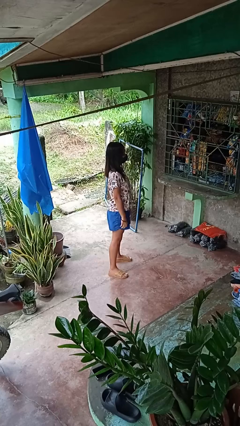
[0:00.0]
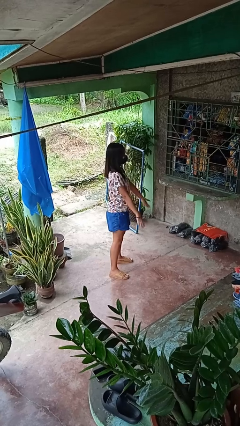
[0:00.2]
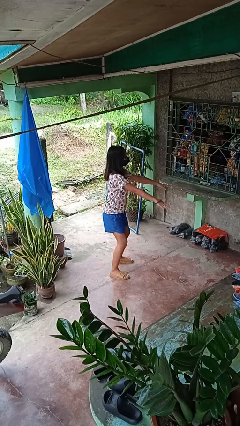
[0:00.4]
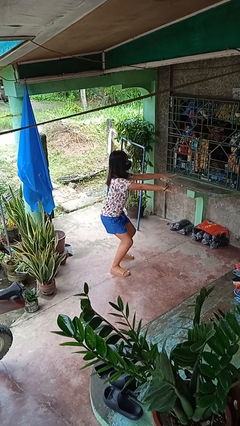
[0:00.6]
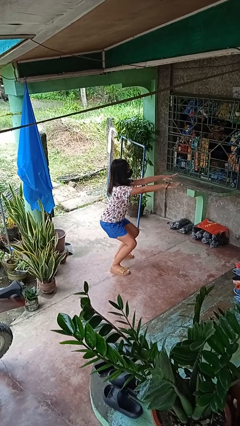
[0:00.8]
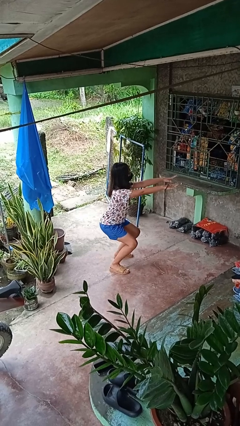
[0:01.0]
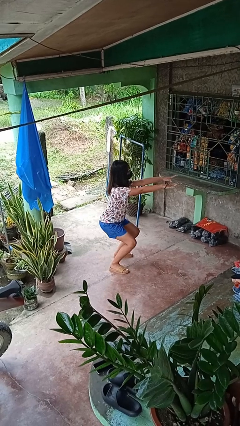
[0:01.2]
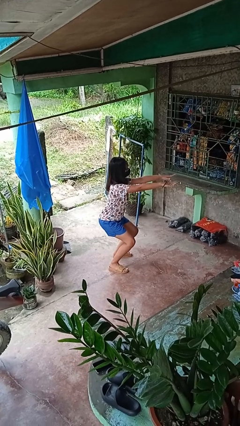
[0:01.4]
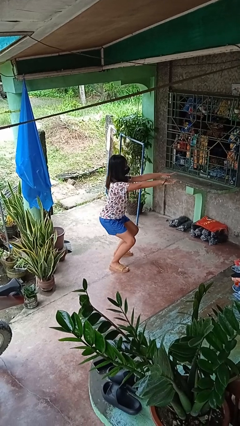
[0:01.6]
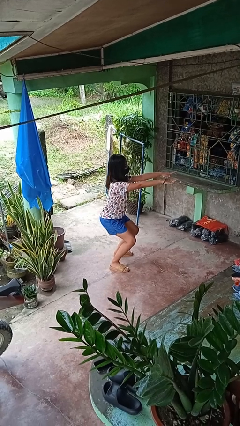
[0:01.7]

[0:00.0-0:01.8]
person squats

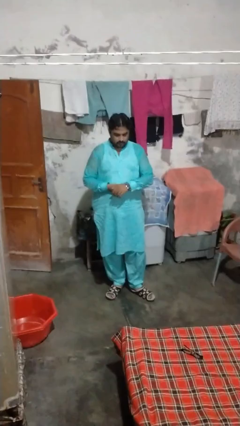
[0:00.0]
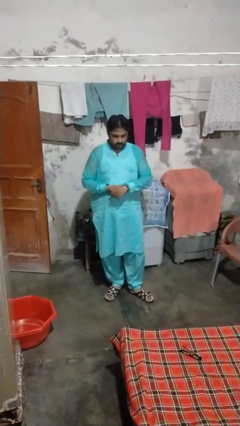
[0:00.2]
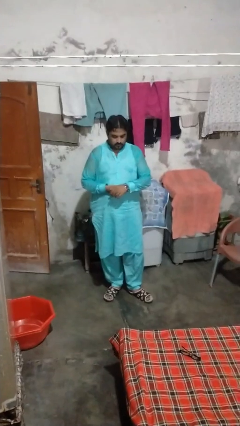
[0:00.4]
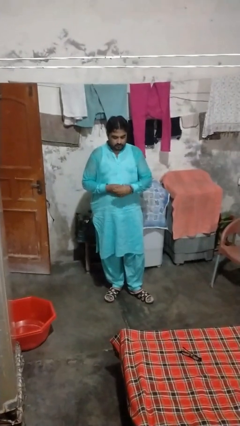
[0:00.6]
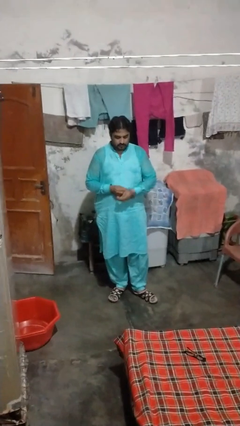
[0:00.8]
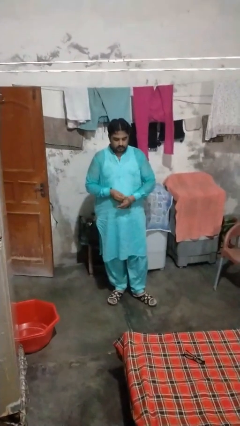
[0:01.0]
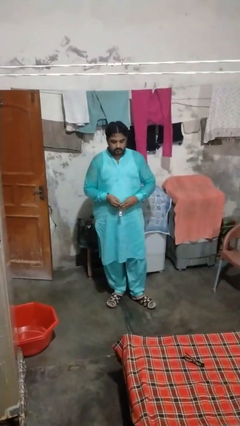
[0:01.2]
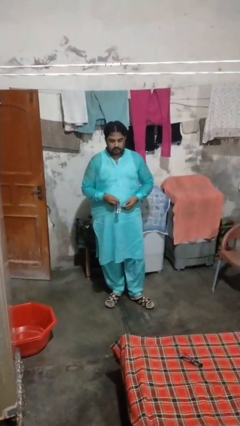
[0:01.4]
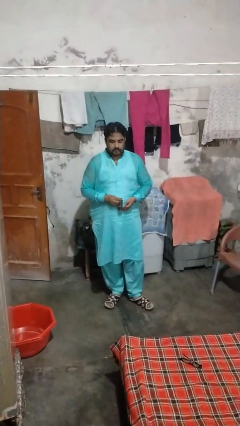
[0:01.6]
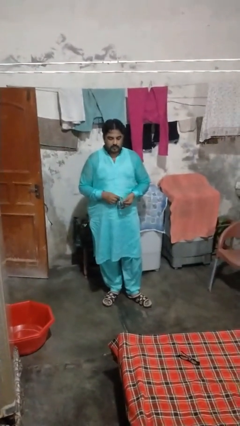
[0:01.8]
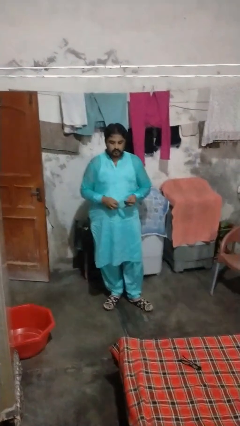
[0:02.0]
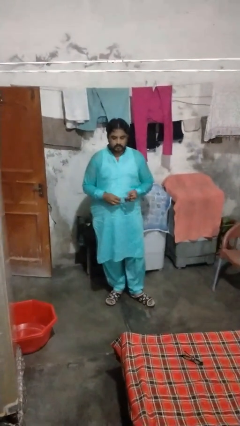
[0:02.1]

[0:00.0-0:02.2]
person takes off wristwatch

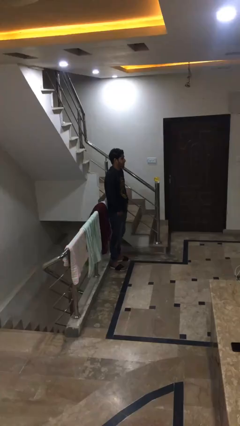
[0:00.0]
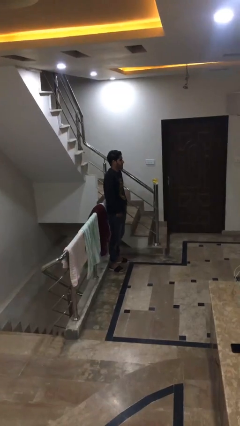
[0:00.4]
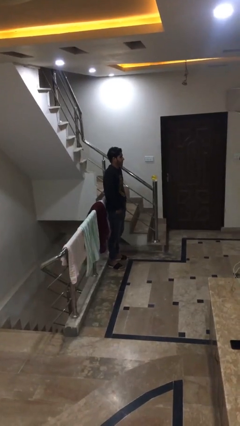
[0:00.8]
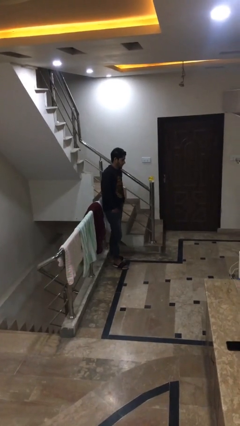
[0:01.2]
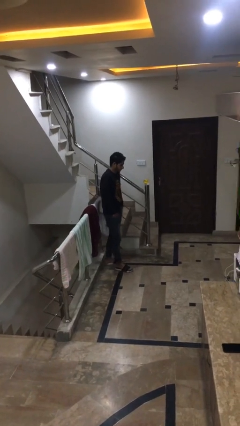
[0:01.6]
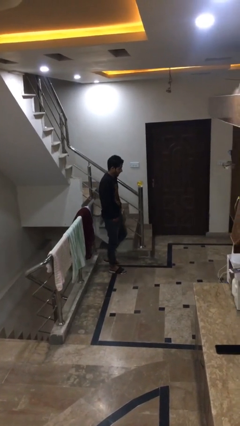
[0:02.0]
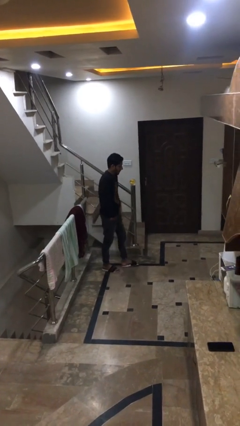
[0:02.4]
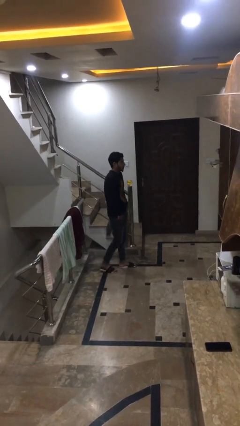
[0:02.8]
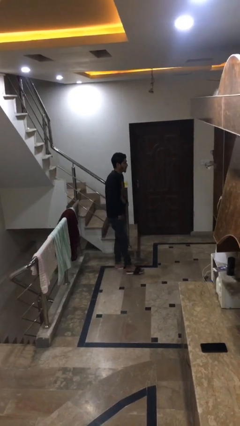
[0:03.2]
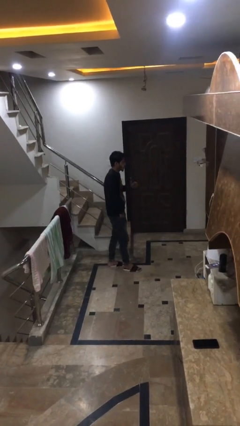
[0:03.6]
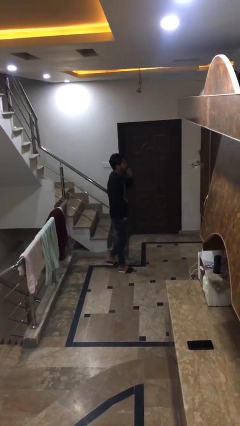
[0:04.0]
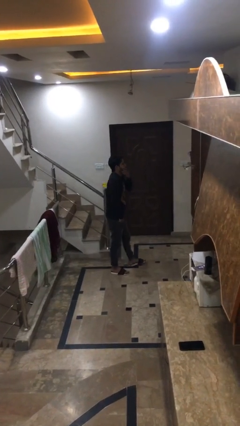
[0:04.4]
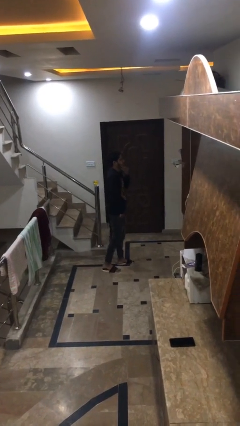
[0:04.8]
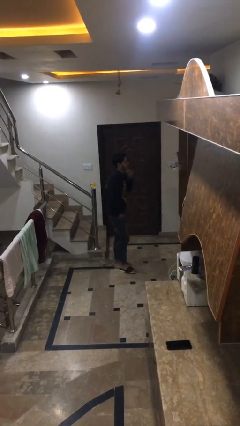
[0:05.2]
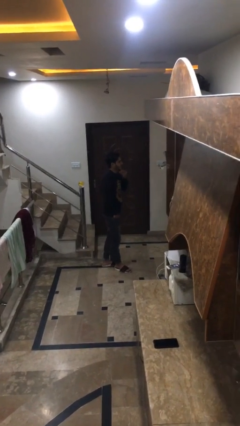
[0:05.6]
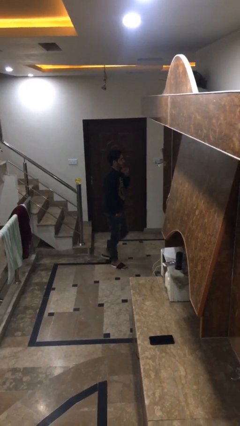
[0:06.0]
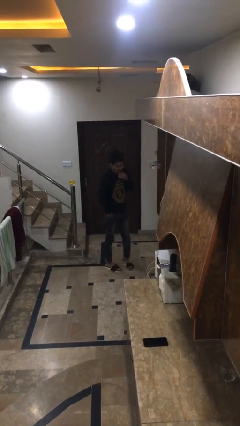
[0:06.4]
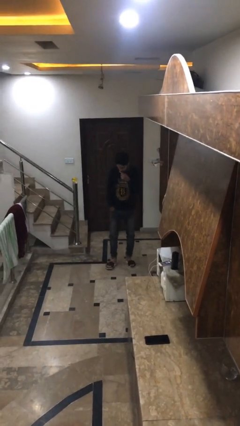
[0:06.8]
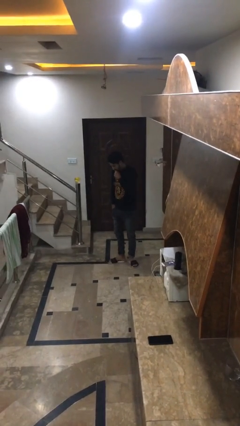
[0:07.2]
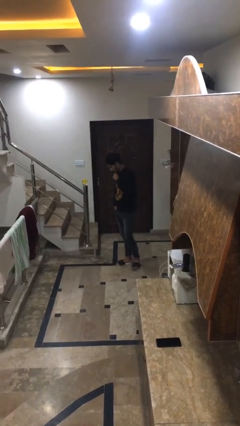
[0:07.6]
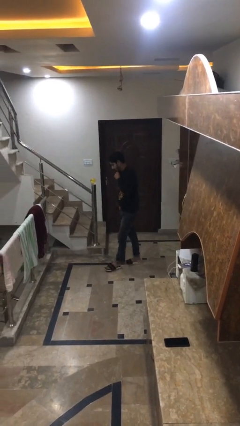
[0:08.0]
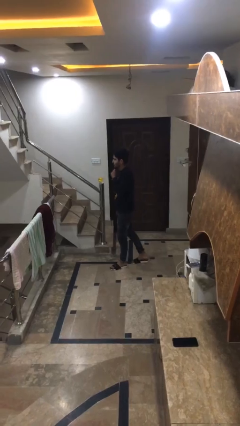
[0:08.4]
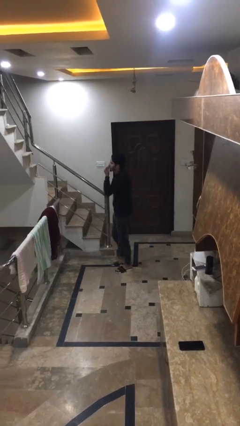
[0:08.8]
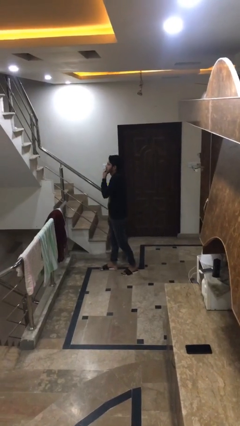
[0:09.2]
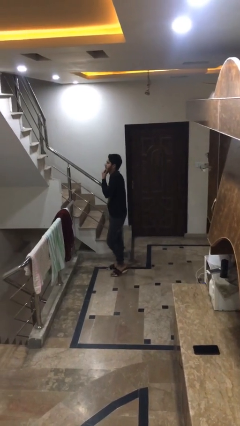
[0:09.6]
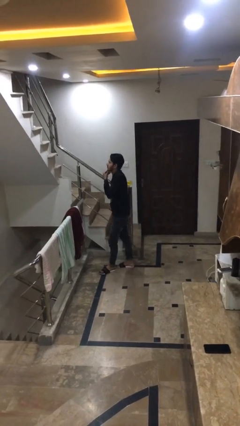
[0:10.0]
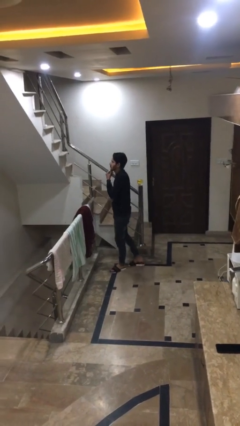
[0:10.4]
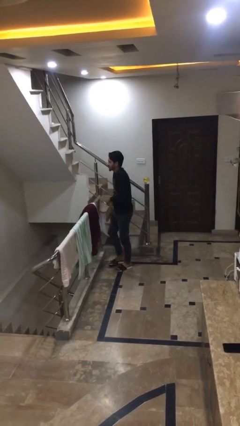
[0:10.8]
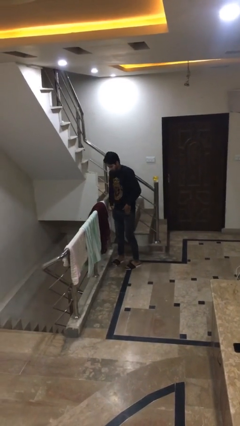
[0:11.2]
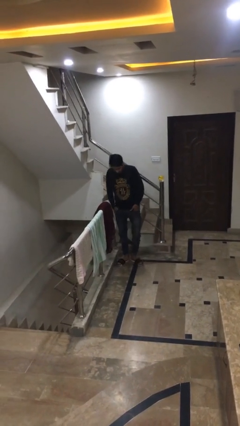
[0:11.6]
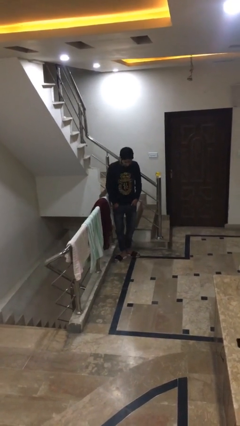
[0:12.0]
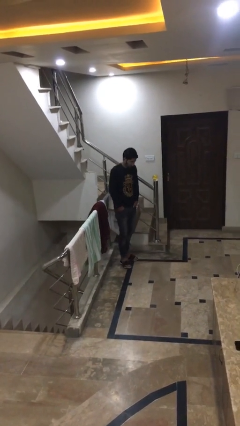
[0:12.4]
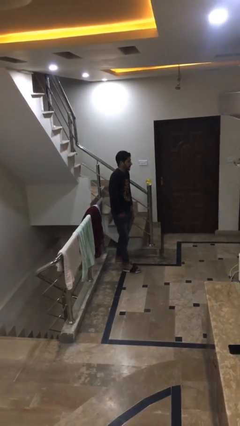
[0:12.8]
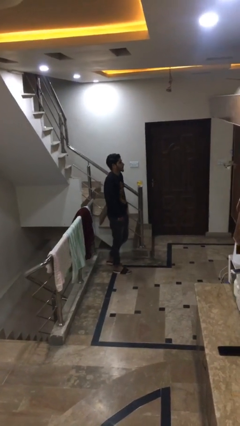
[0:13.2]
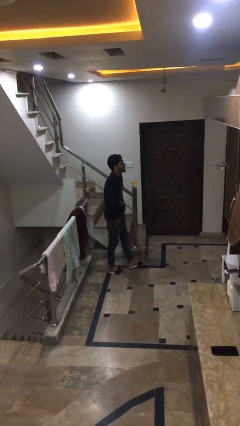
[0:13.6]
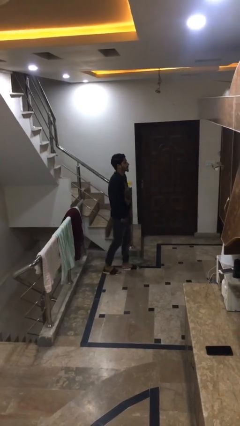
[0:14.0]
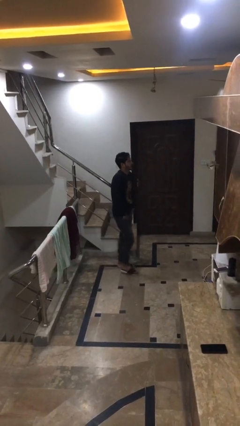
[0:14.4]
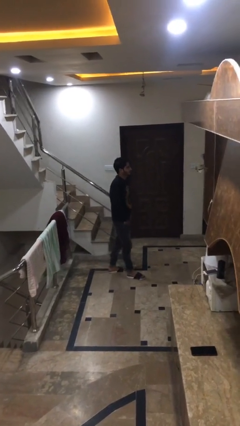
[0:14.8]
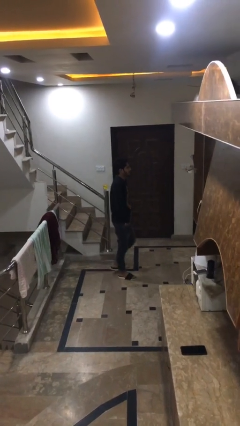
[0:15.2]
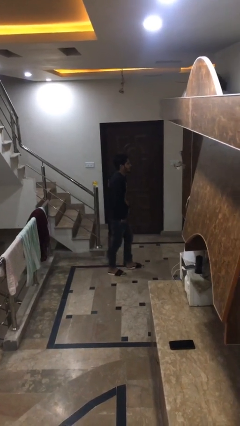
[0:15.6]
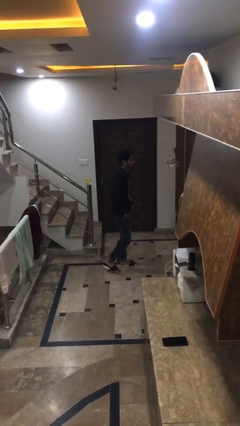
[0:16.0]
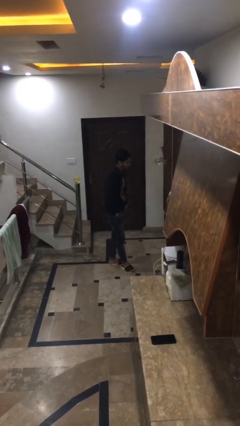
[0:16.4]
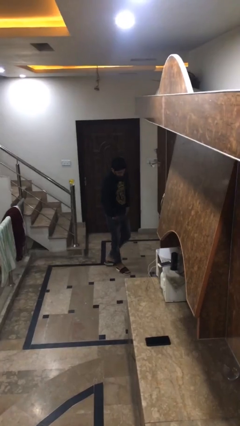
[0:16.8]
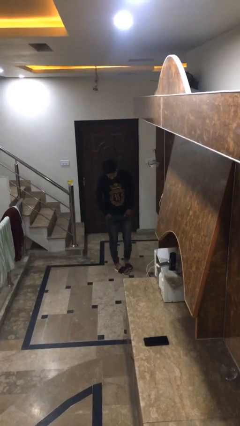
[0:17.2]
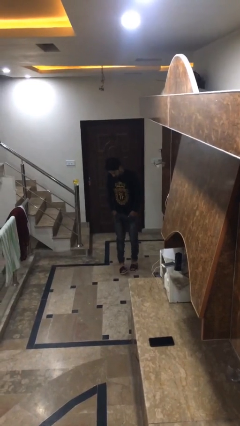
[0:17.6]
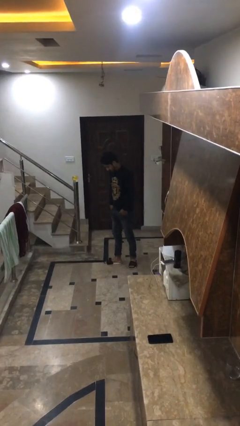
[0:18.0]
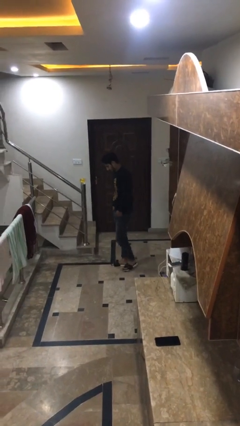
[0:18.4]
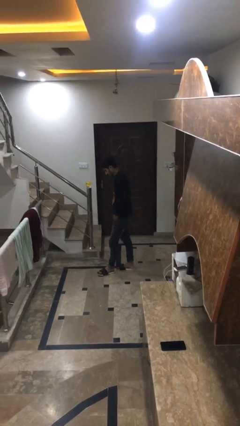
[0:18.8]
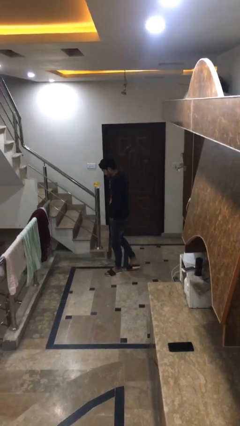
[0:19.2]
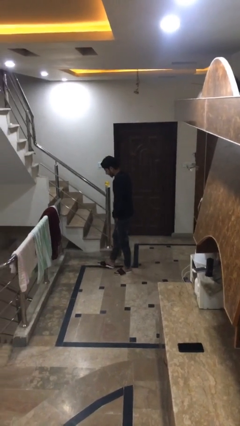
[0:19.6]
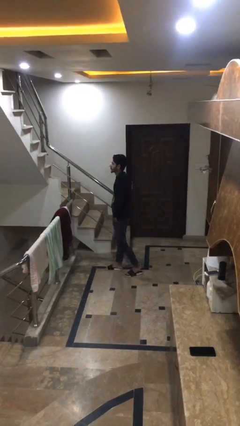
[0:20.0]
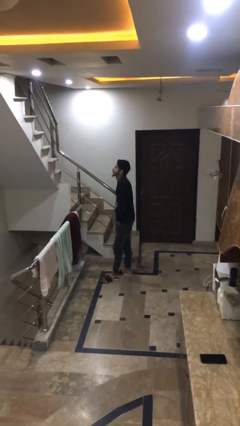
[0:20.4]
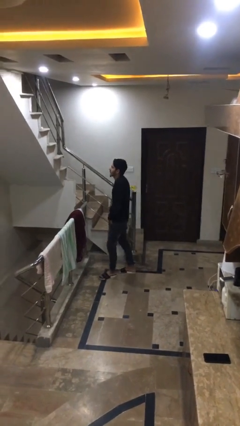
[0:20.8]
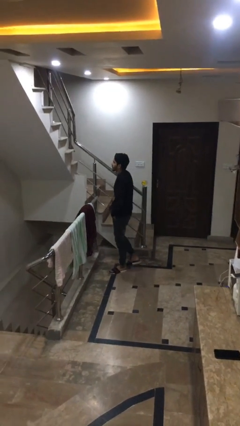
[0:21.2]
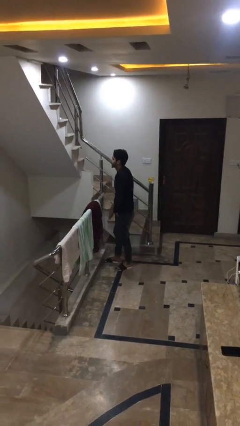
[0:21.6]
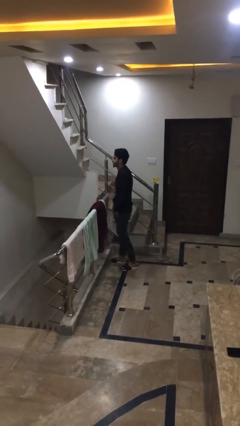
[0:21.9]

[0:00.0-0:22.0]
person walks

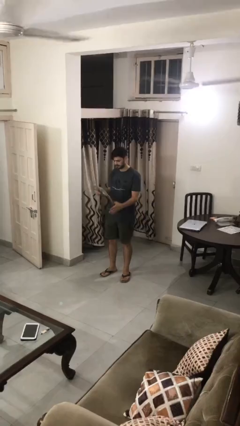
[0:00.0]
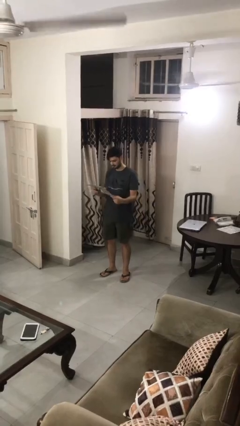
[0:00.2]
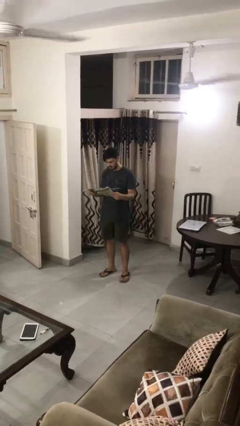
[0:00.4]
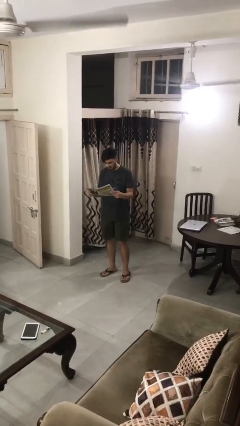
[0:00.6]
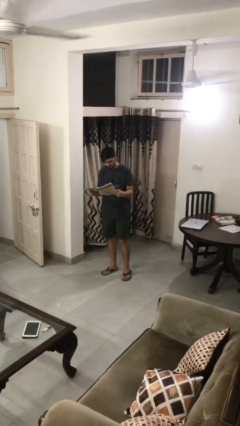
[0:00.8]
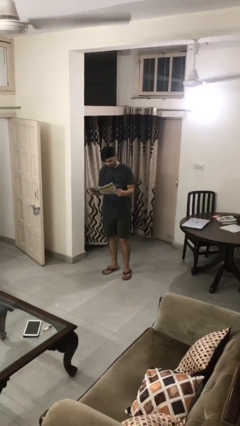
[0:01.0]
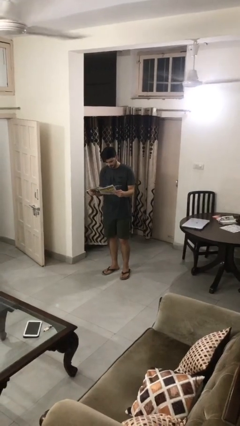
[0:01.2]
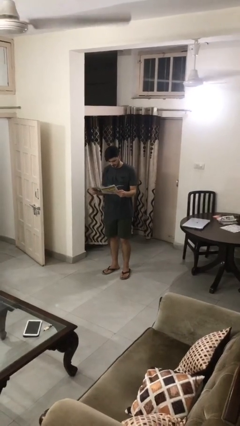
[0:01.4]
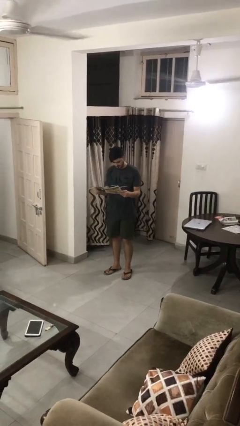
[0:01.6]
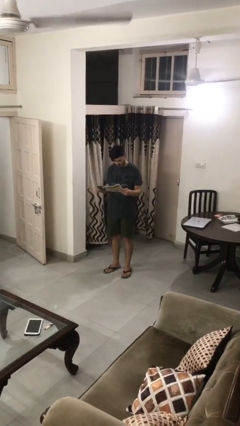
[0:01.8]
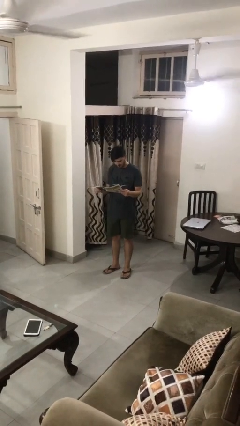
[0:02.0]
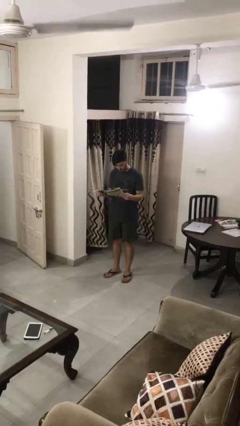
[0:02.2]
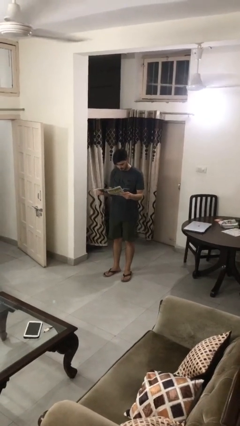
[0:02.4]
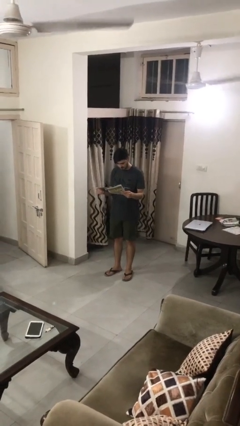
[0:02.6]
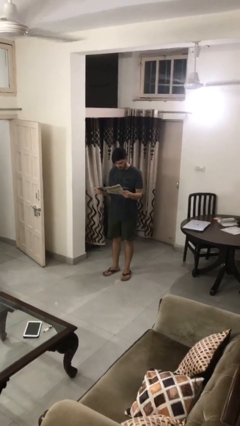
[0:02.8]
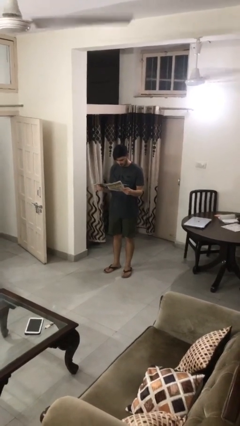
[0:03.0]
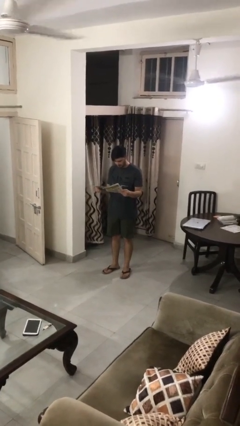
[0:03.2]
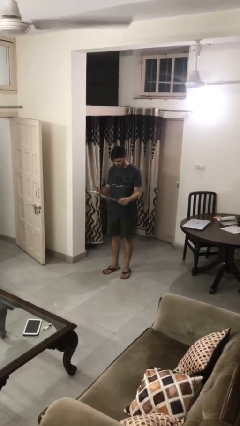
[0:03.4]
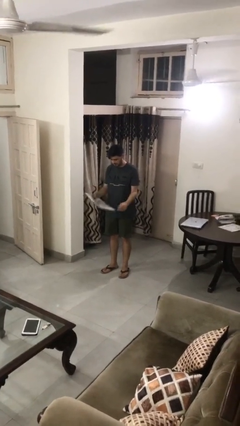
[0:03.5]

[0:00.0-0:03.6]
person reads newspaper
